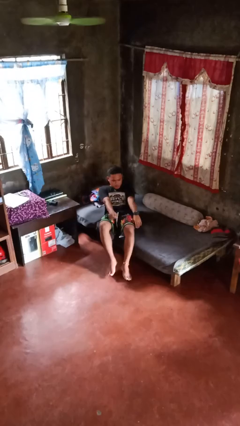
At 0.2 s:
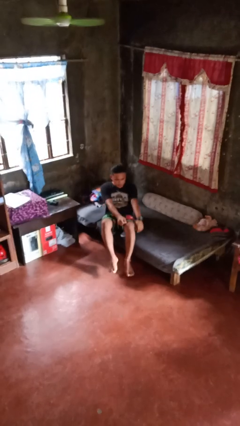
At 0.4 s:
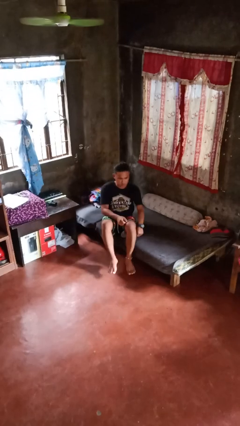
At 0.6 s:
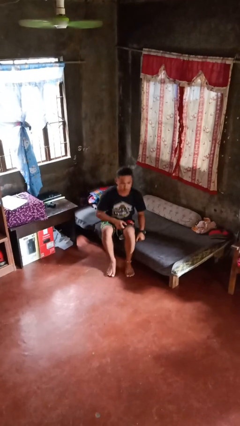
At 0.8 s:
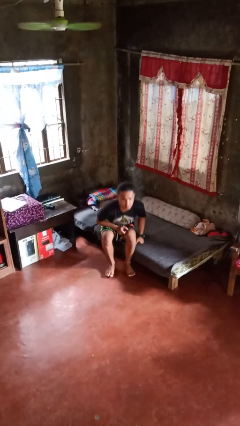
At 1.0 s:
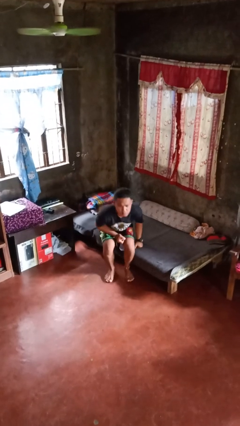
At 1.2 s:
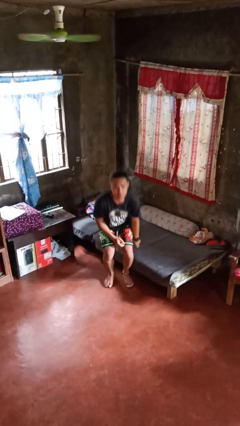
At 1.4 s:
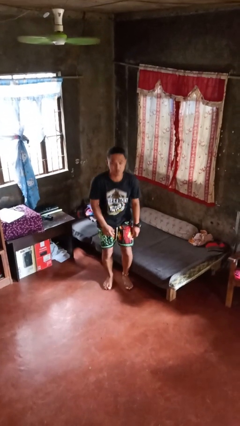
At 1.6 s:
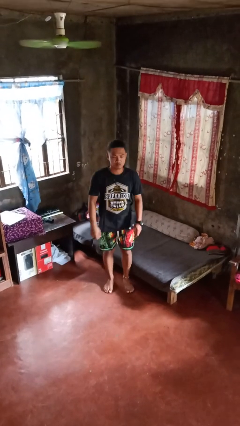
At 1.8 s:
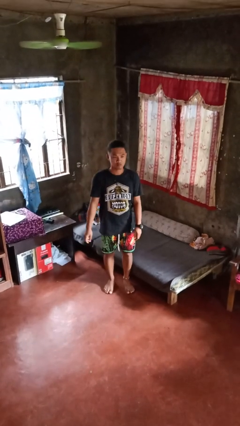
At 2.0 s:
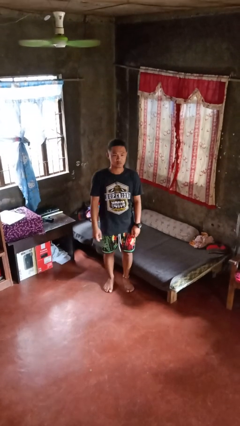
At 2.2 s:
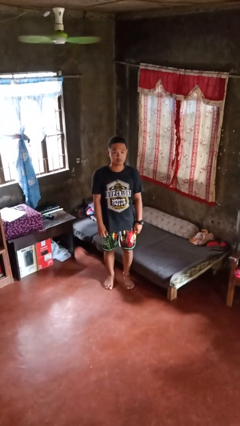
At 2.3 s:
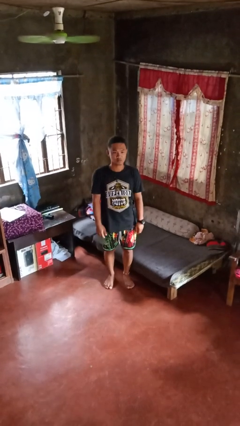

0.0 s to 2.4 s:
person stands up

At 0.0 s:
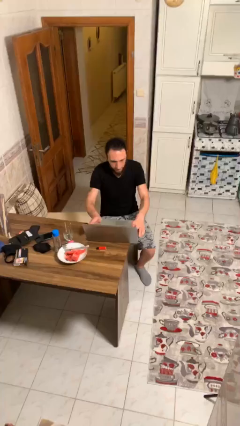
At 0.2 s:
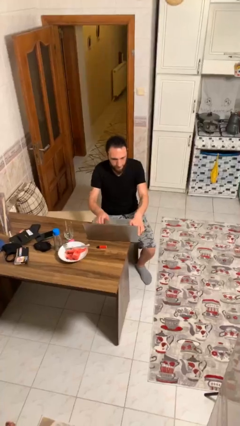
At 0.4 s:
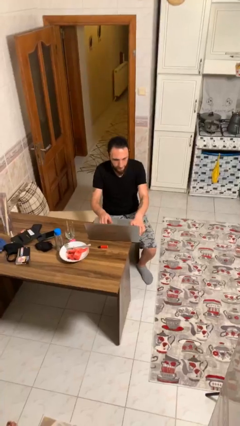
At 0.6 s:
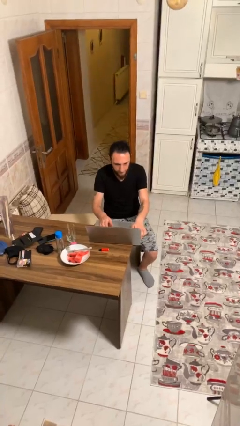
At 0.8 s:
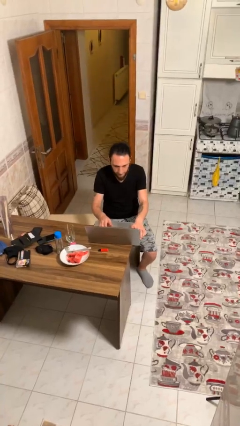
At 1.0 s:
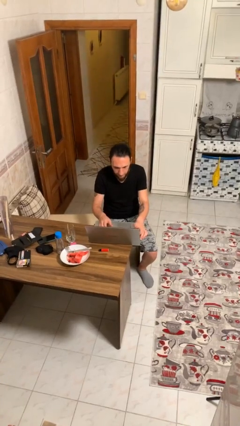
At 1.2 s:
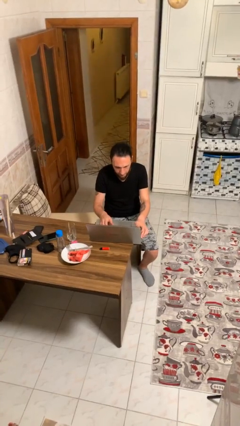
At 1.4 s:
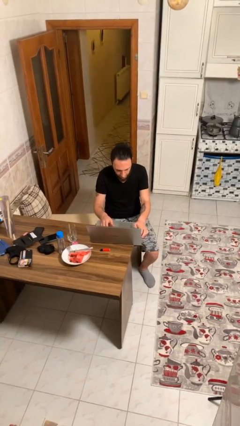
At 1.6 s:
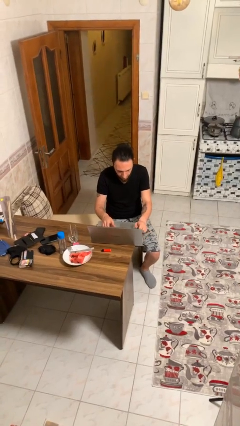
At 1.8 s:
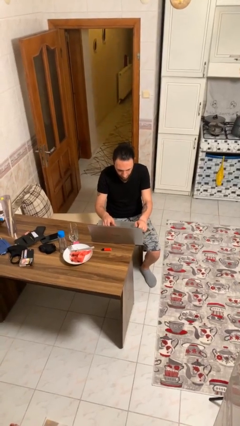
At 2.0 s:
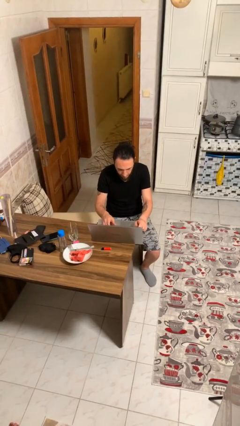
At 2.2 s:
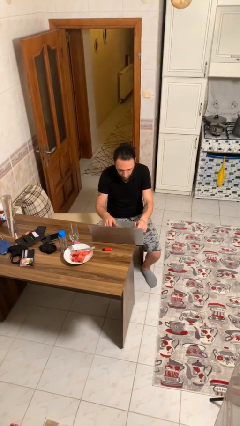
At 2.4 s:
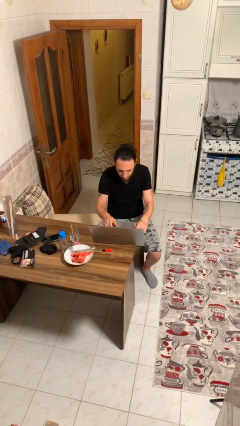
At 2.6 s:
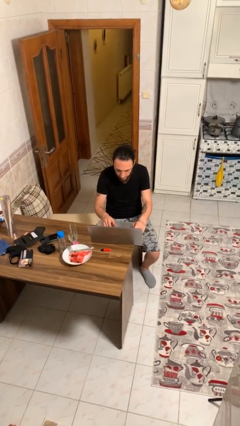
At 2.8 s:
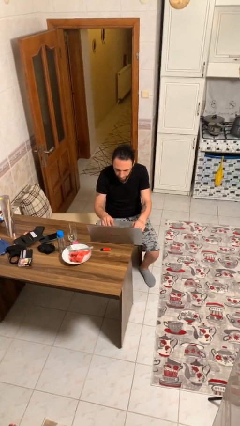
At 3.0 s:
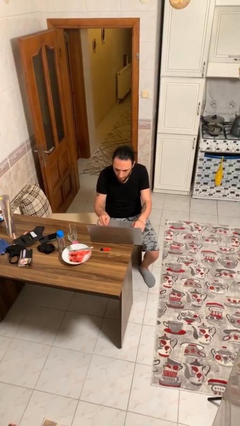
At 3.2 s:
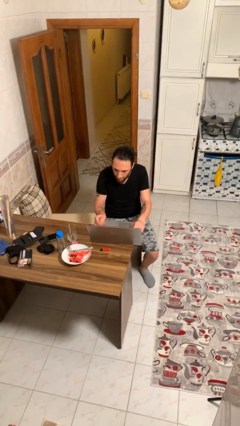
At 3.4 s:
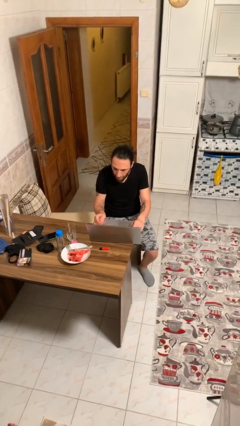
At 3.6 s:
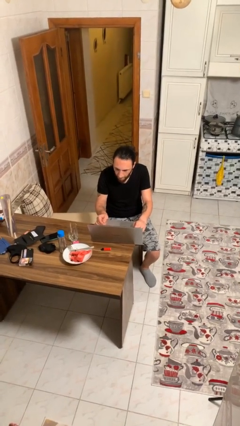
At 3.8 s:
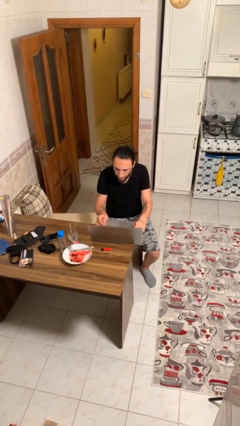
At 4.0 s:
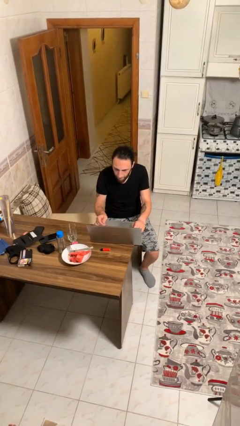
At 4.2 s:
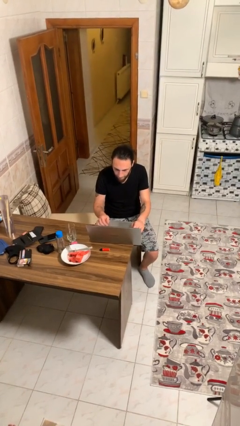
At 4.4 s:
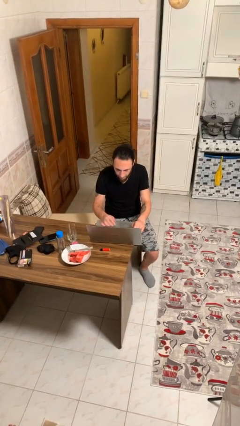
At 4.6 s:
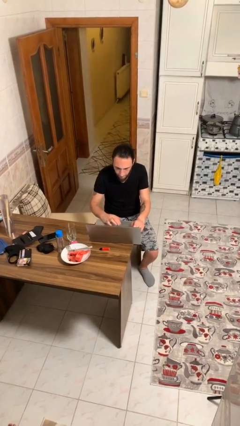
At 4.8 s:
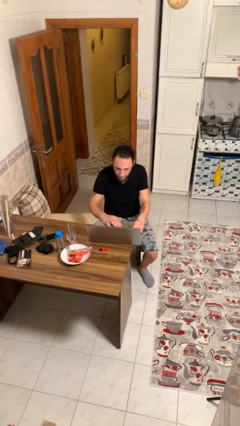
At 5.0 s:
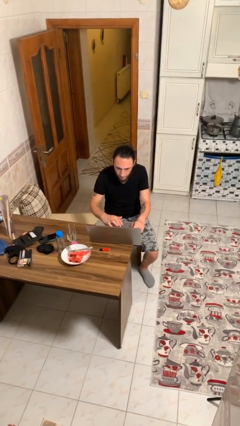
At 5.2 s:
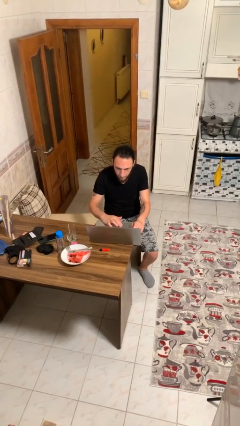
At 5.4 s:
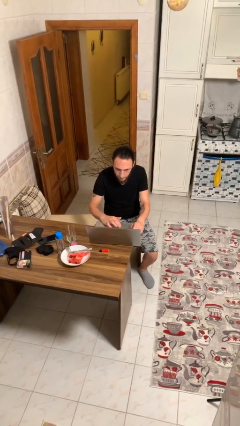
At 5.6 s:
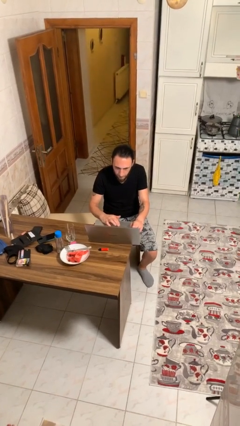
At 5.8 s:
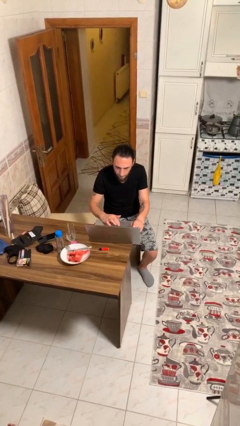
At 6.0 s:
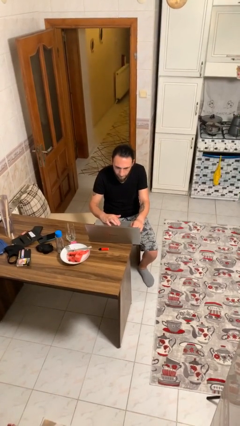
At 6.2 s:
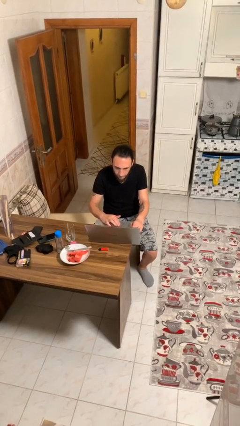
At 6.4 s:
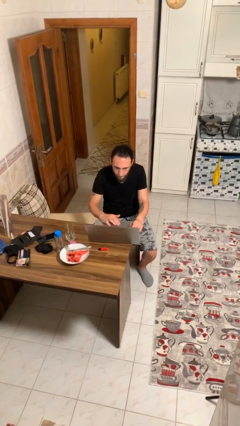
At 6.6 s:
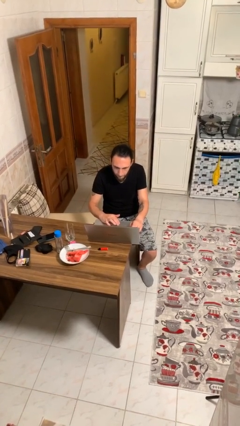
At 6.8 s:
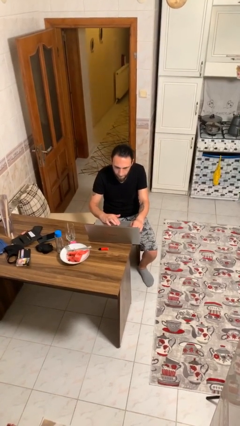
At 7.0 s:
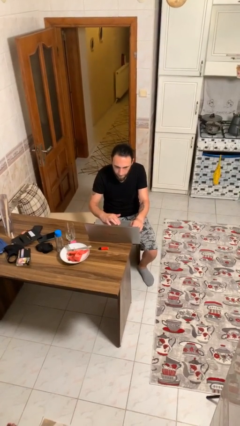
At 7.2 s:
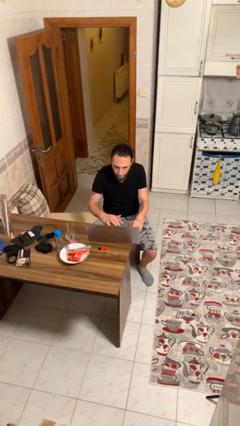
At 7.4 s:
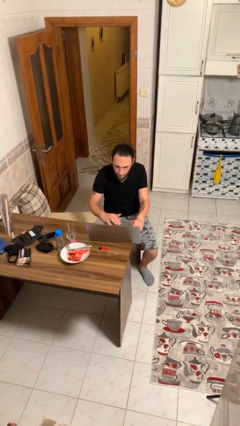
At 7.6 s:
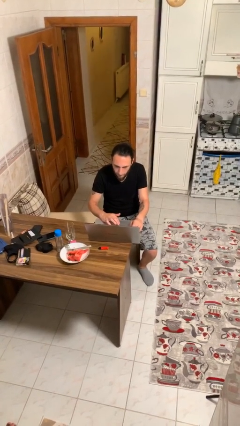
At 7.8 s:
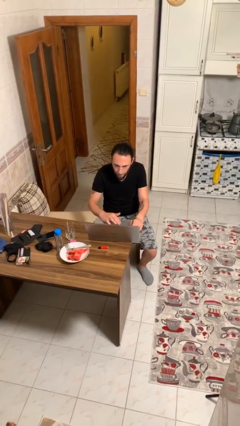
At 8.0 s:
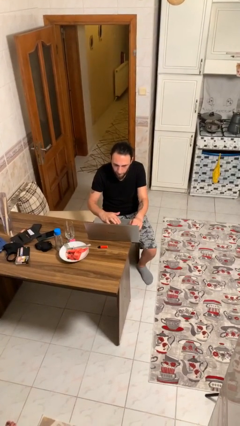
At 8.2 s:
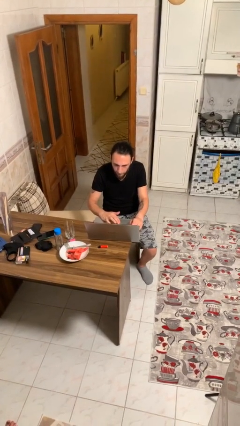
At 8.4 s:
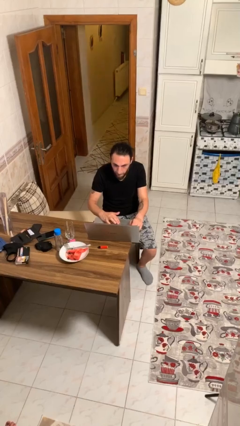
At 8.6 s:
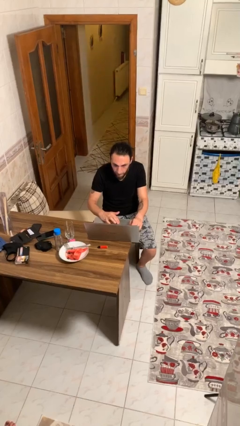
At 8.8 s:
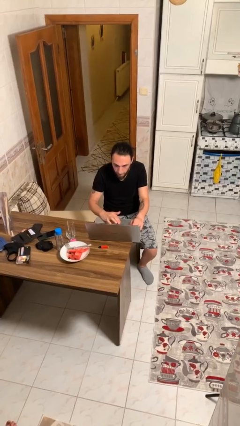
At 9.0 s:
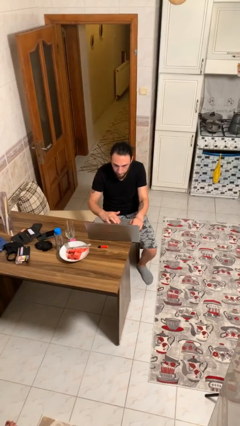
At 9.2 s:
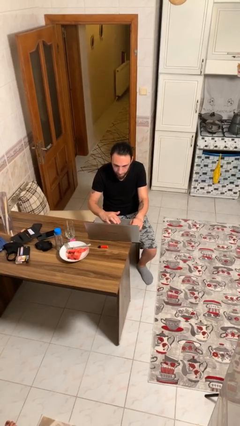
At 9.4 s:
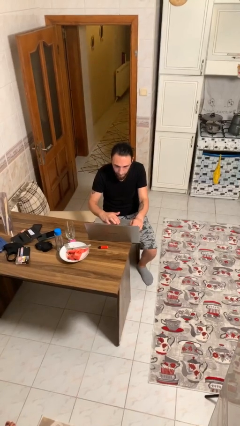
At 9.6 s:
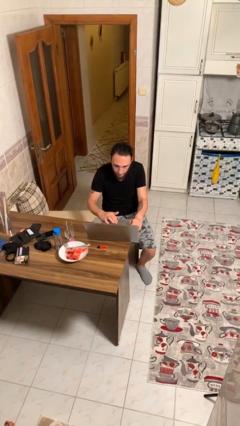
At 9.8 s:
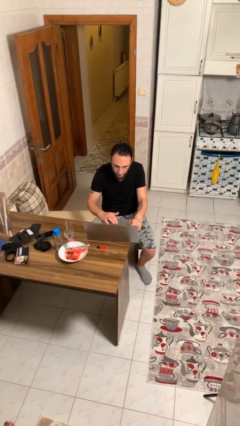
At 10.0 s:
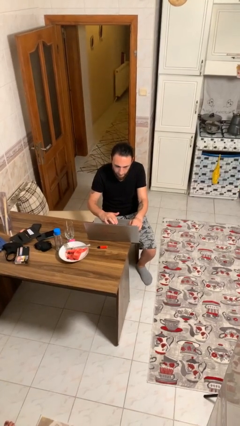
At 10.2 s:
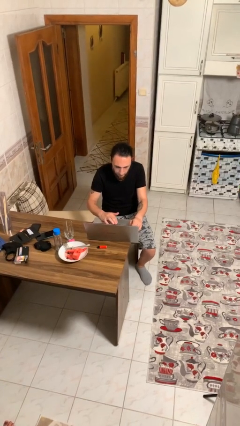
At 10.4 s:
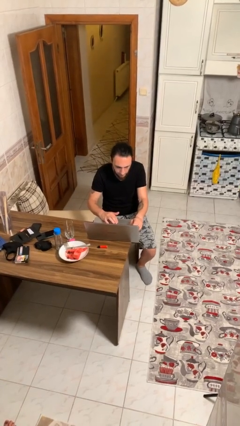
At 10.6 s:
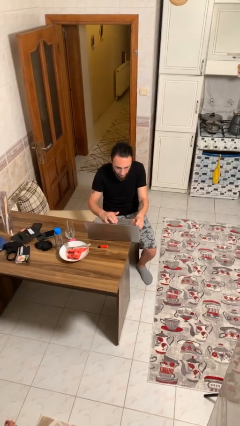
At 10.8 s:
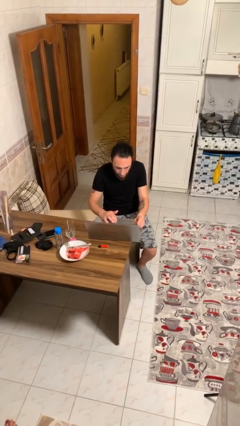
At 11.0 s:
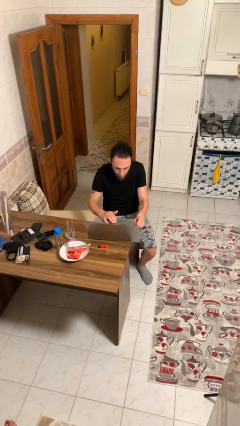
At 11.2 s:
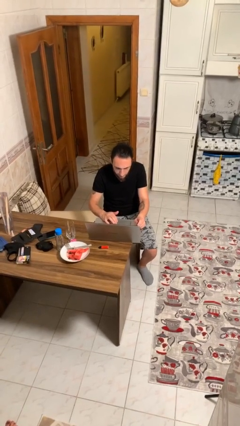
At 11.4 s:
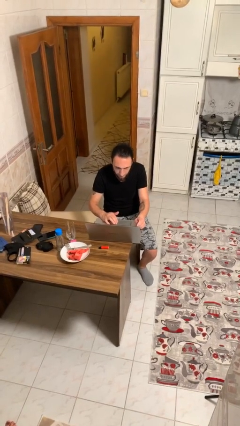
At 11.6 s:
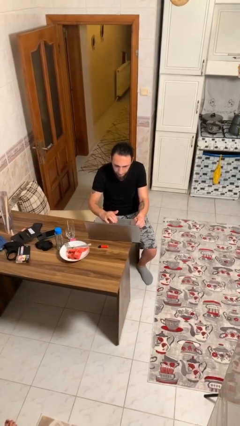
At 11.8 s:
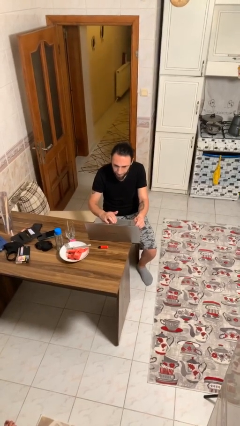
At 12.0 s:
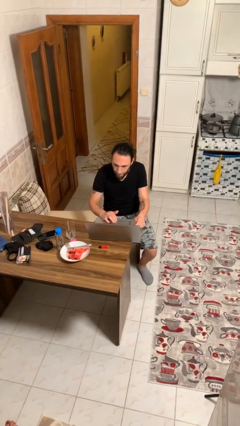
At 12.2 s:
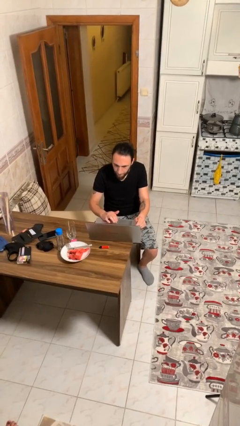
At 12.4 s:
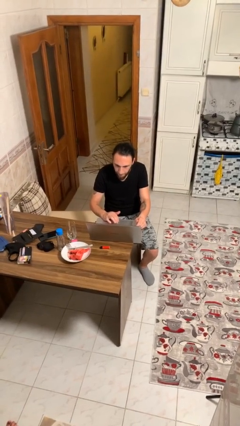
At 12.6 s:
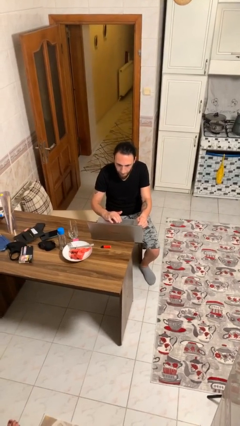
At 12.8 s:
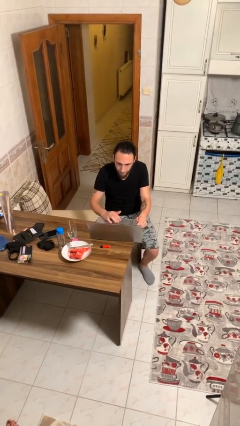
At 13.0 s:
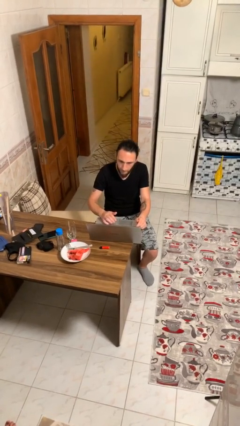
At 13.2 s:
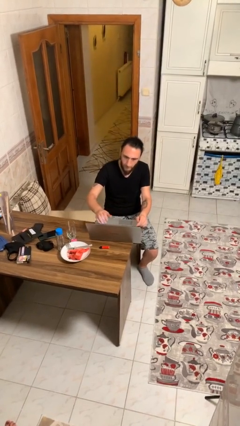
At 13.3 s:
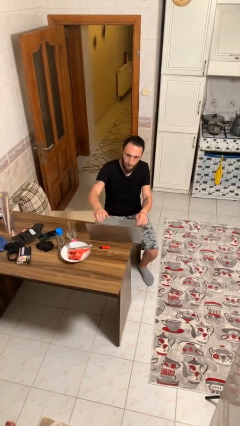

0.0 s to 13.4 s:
person interacts with laptop

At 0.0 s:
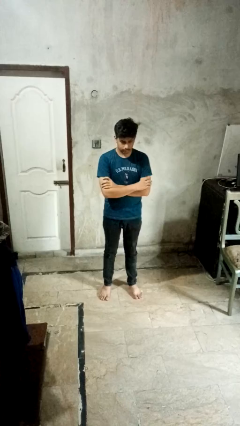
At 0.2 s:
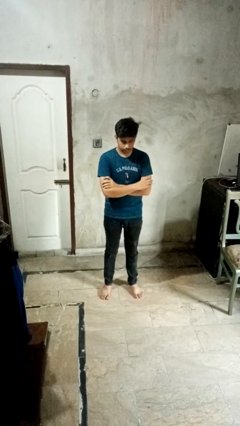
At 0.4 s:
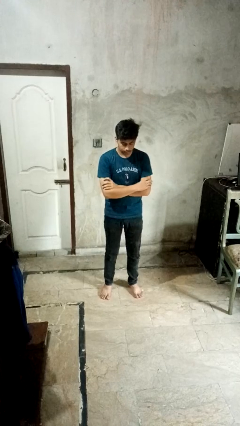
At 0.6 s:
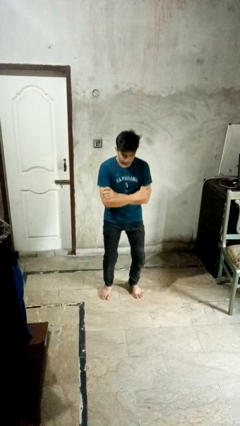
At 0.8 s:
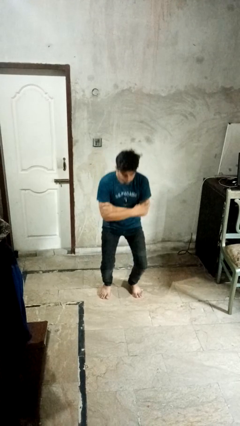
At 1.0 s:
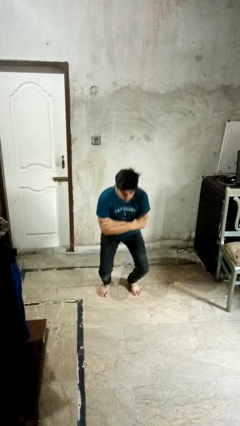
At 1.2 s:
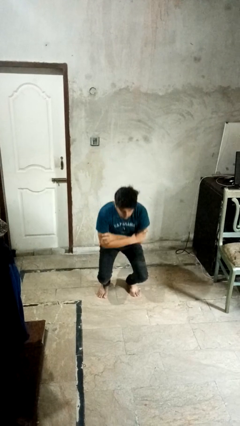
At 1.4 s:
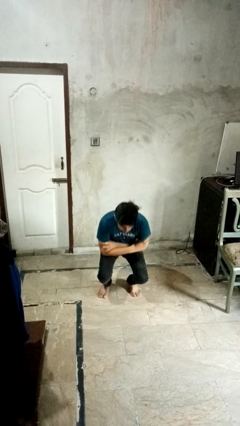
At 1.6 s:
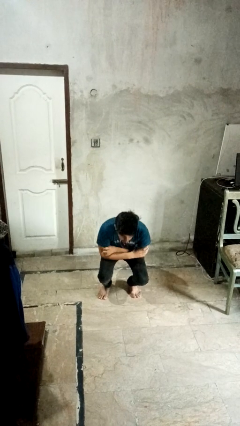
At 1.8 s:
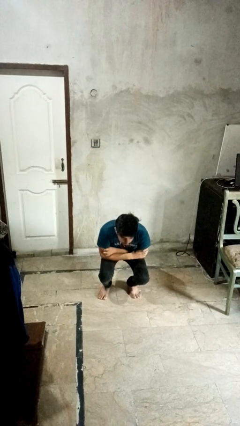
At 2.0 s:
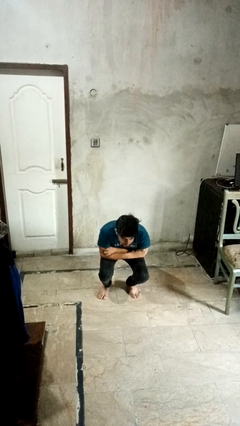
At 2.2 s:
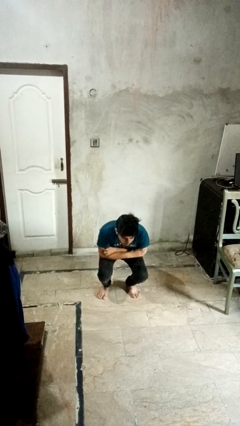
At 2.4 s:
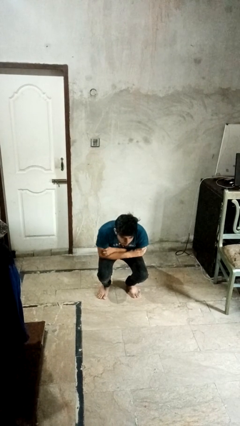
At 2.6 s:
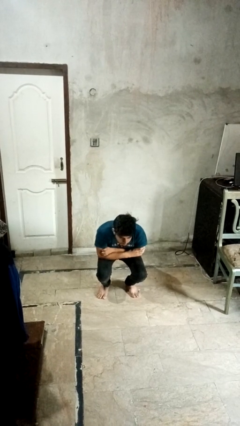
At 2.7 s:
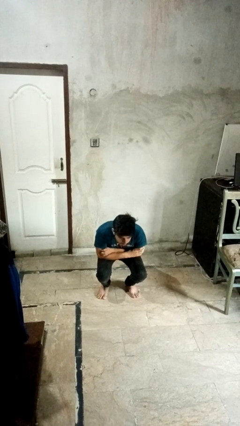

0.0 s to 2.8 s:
person squats
